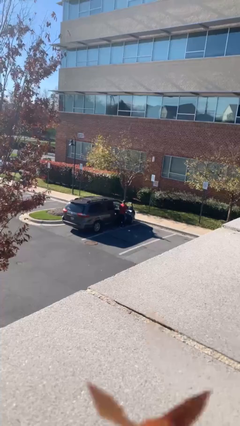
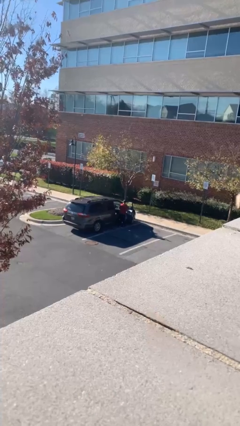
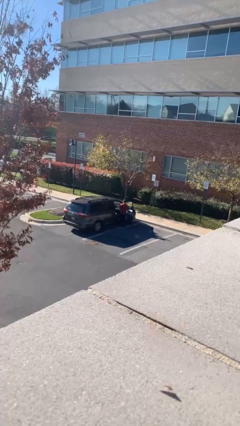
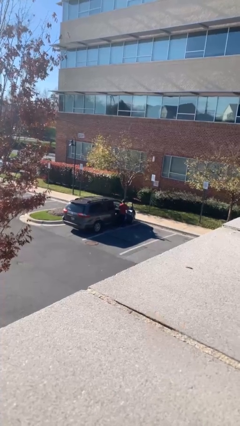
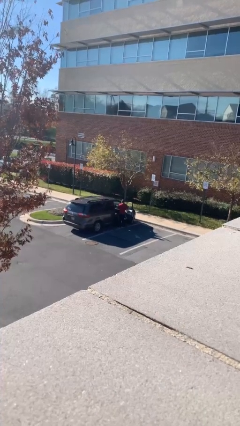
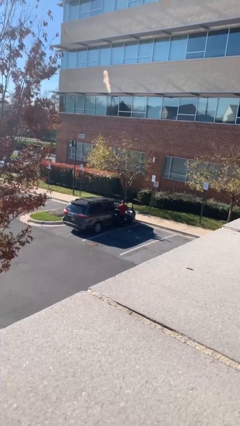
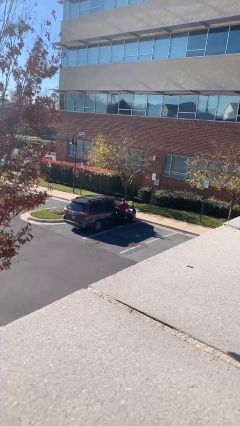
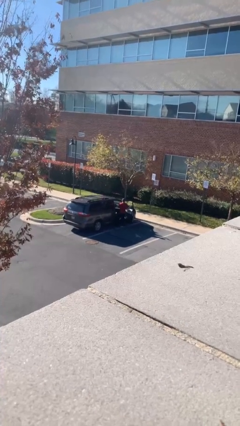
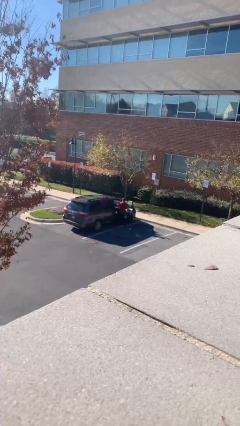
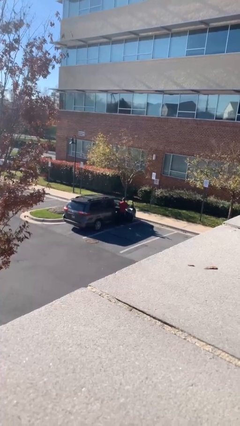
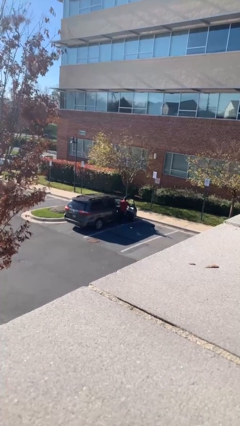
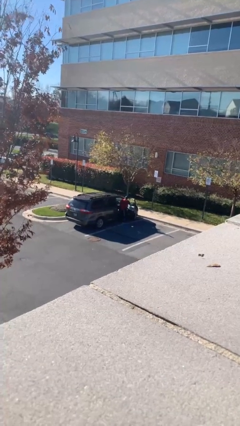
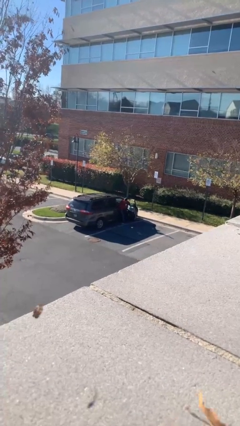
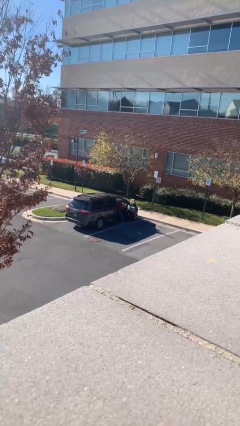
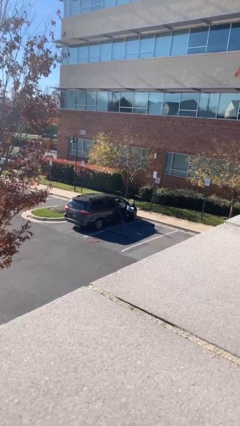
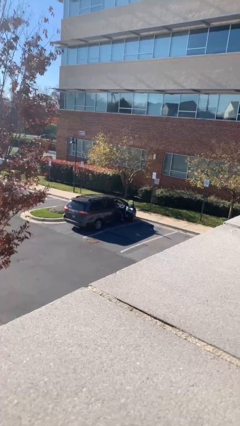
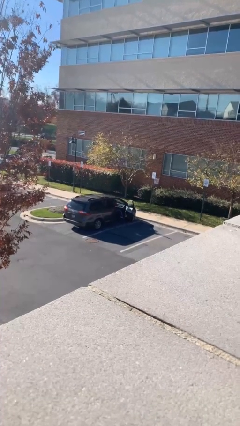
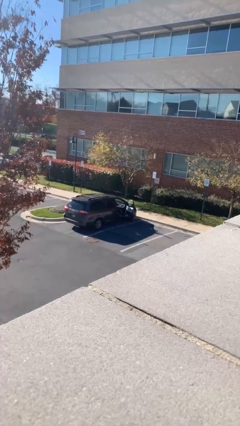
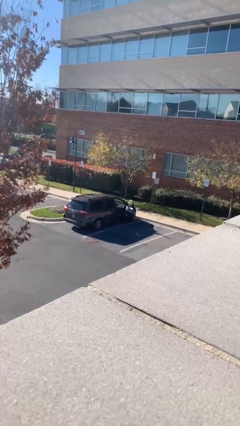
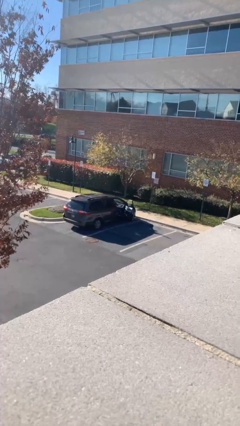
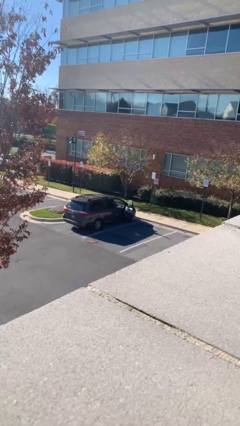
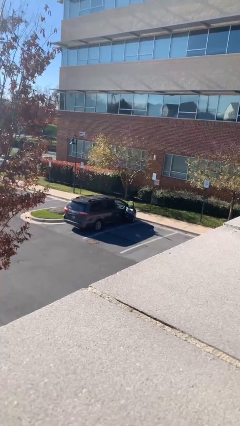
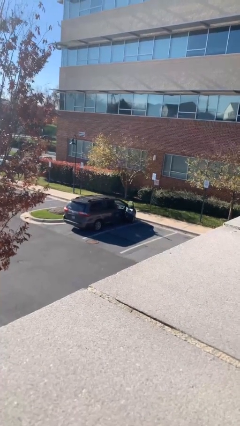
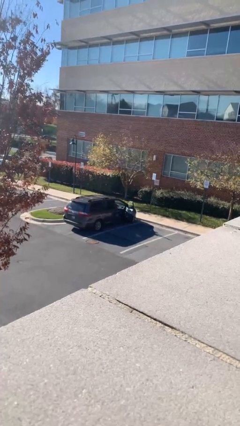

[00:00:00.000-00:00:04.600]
person enters car

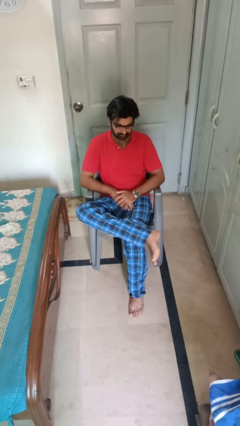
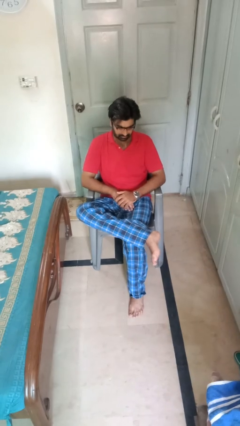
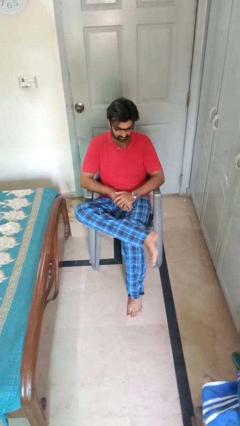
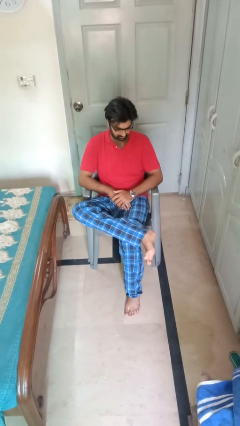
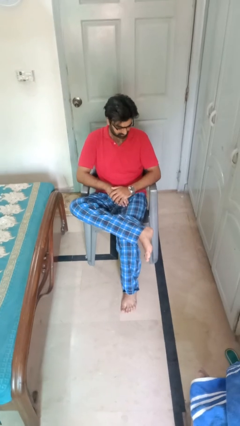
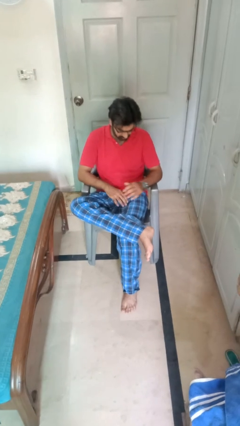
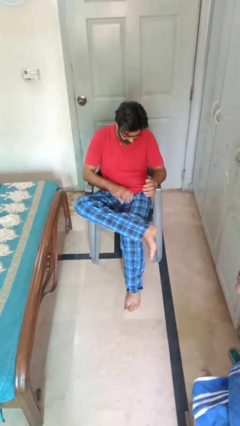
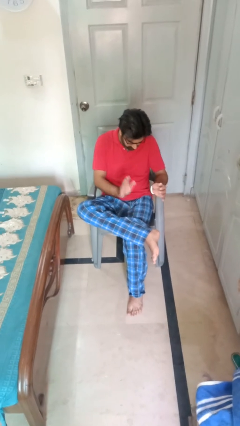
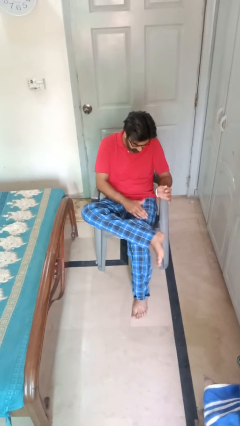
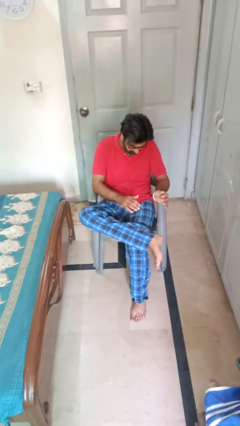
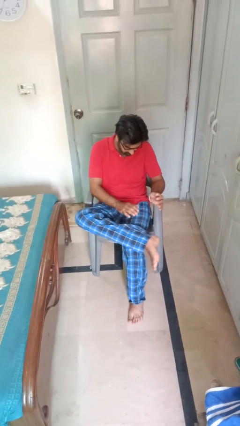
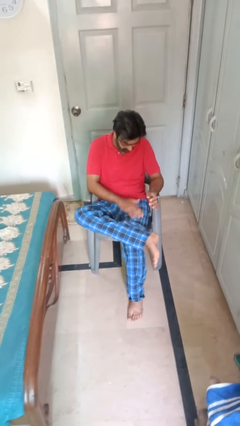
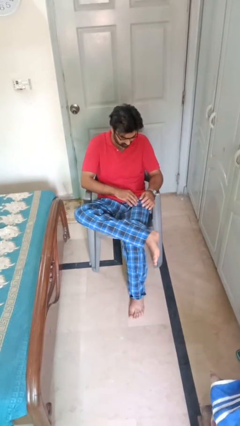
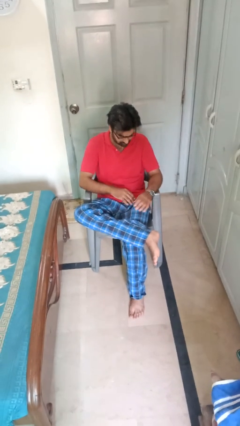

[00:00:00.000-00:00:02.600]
person swats bug

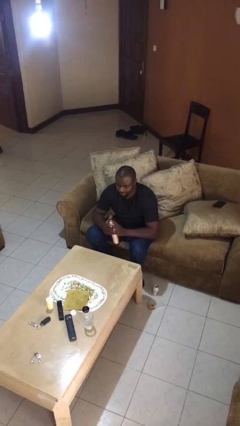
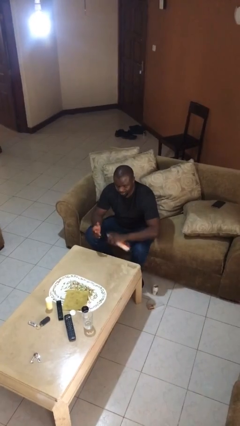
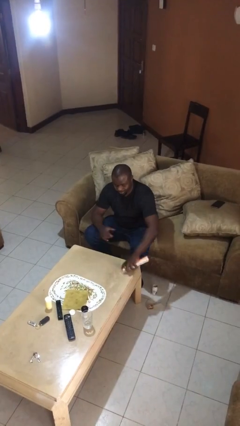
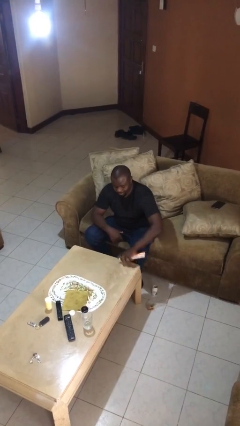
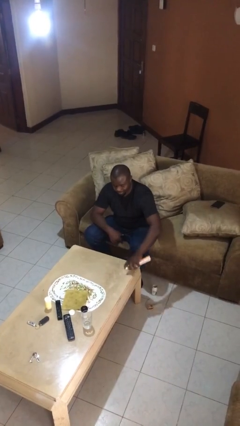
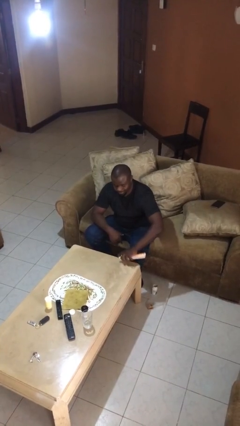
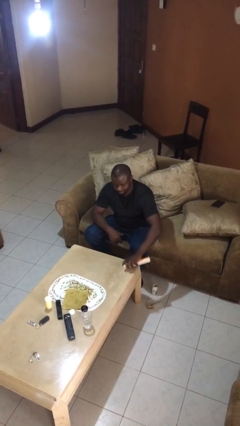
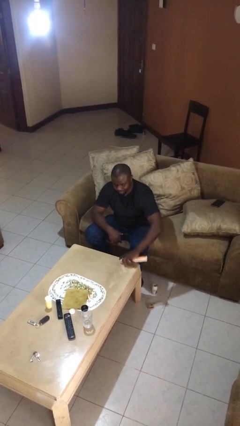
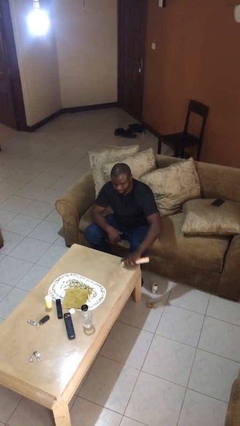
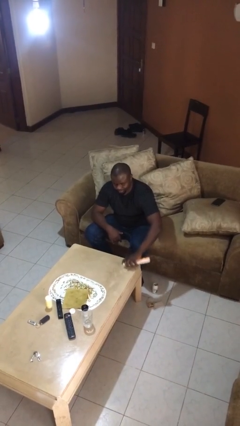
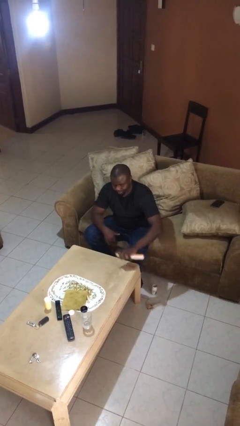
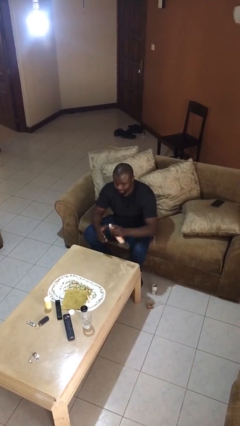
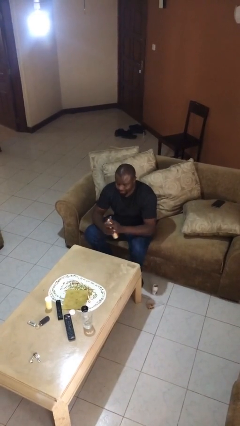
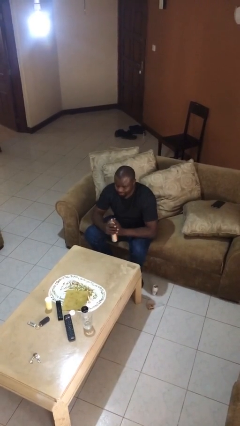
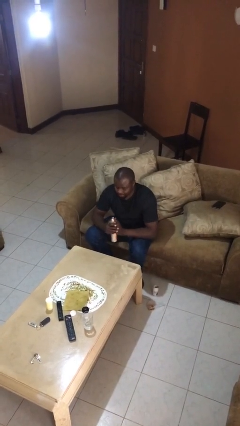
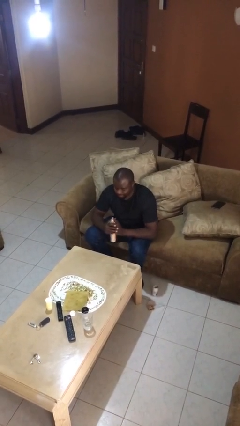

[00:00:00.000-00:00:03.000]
person sprays from bottle

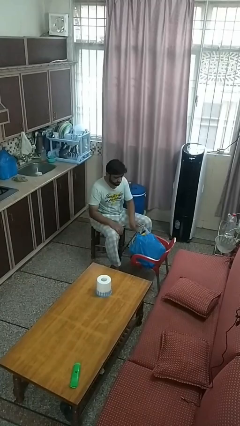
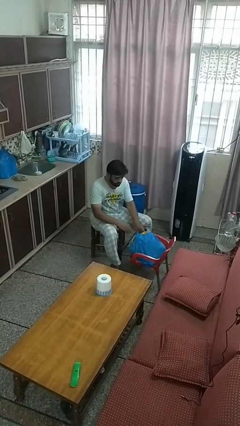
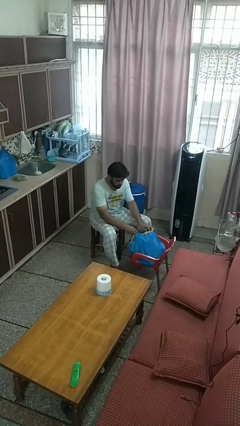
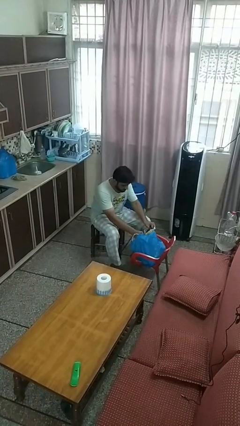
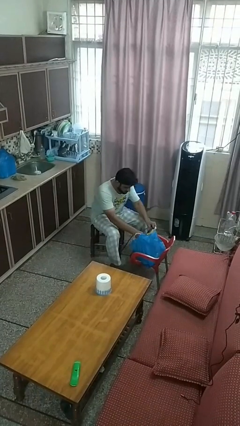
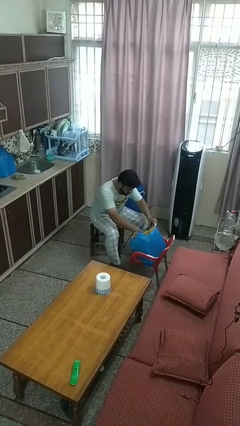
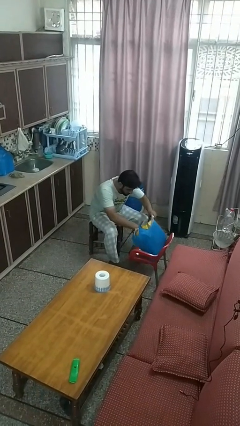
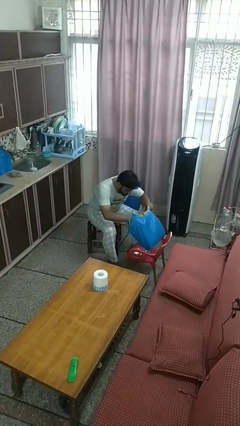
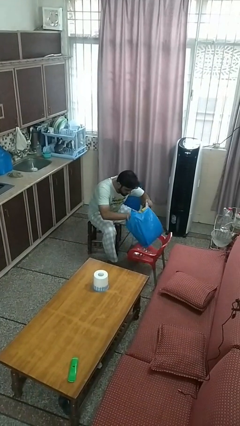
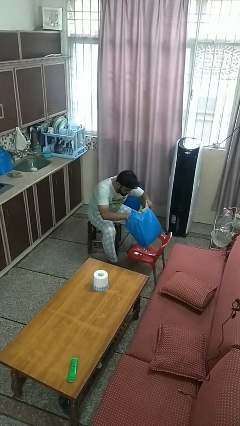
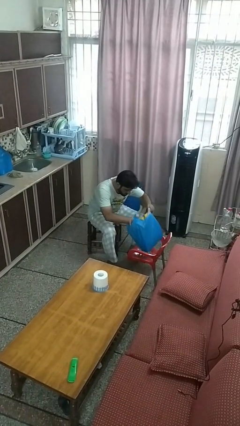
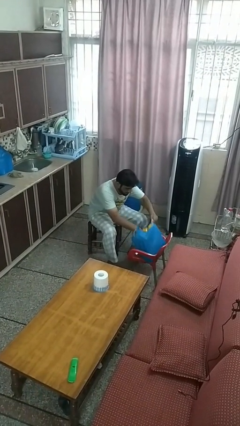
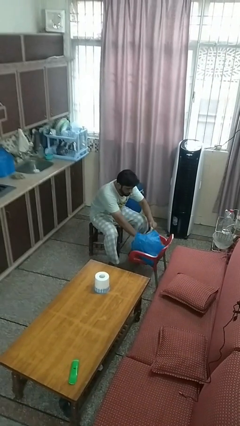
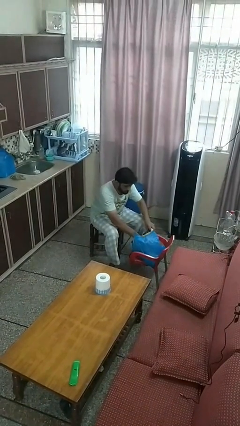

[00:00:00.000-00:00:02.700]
person searches in bag

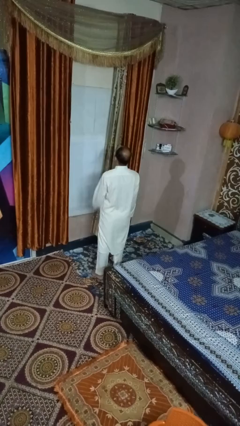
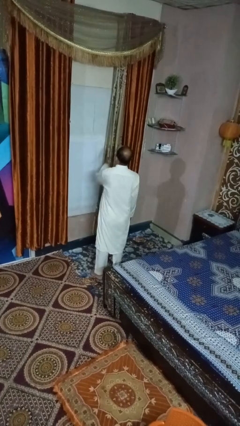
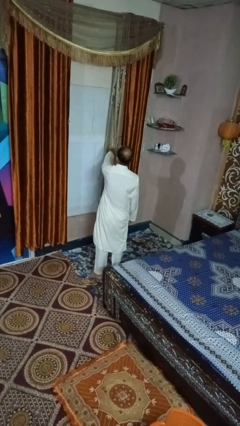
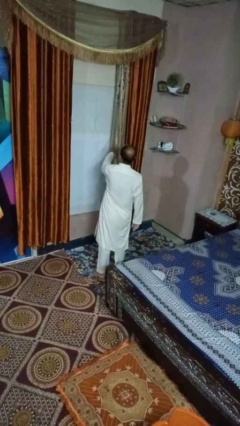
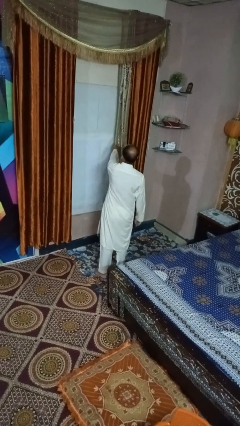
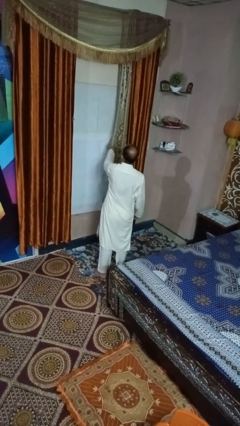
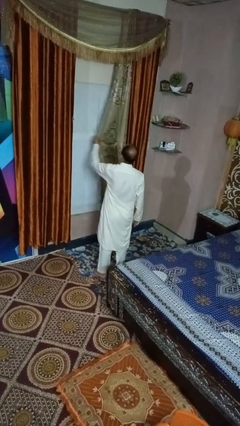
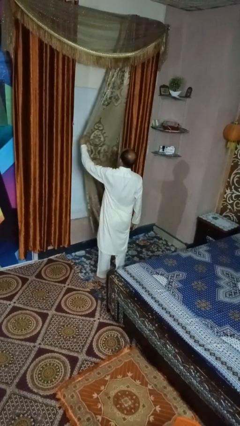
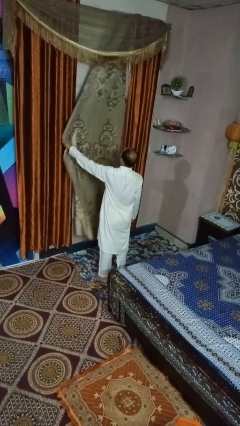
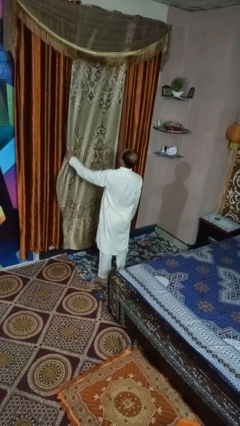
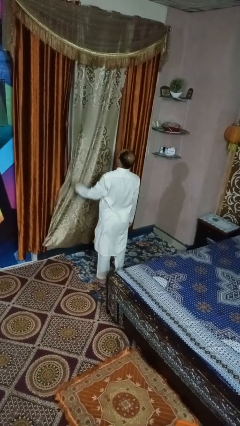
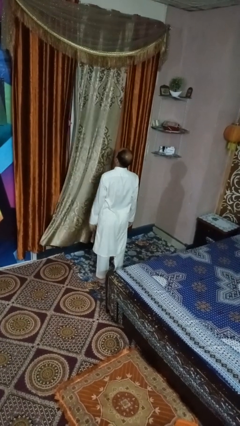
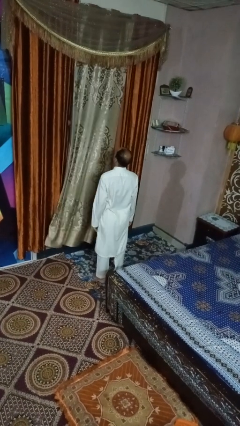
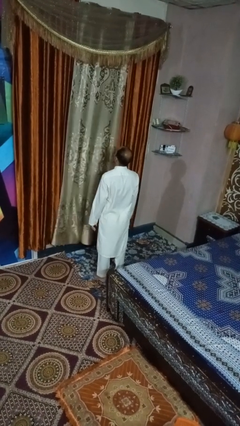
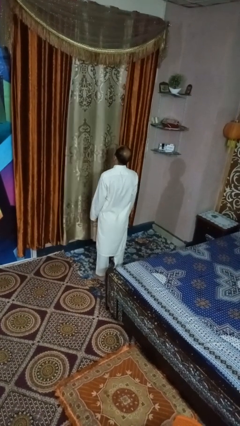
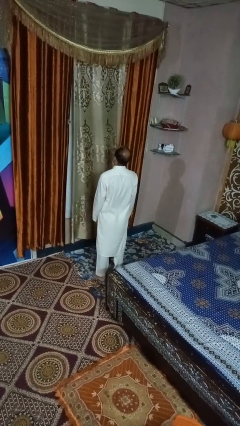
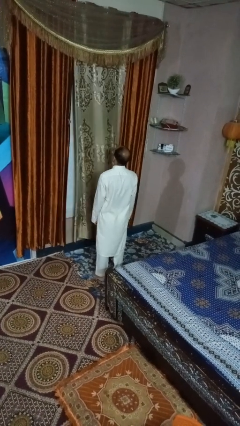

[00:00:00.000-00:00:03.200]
person closes curtains

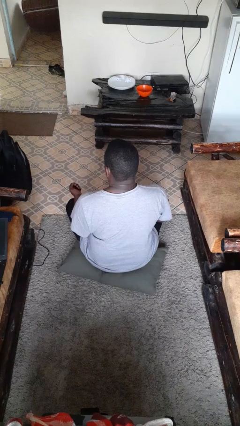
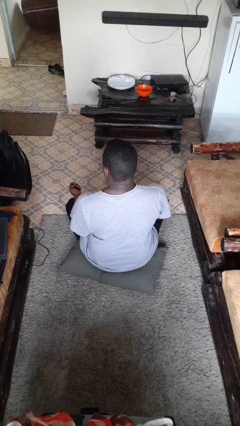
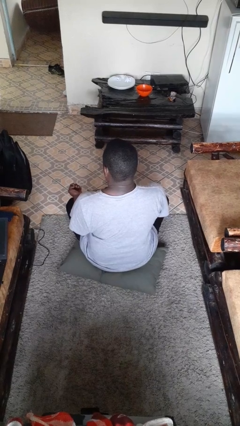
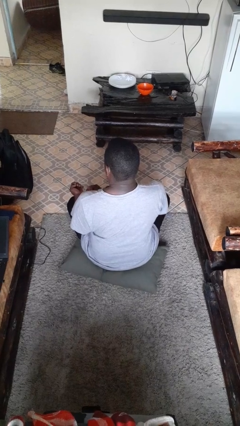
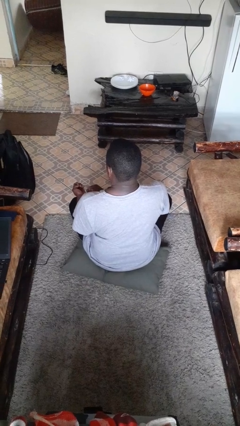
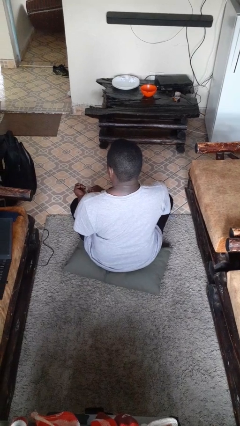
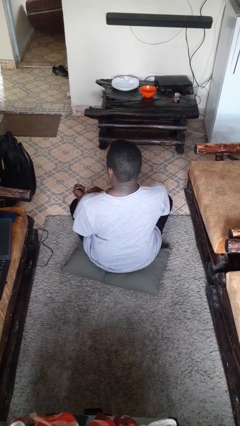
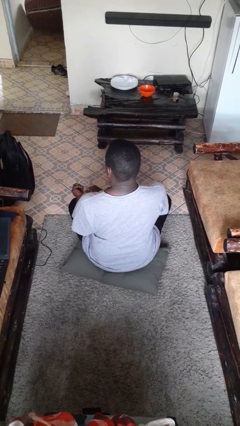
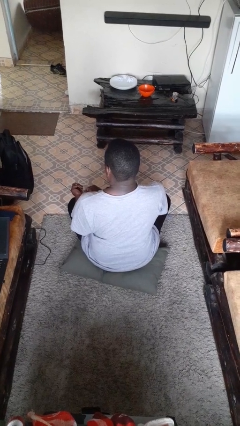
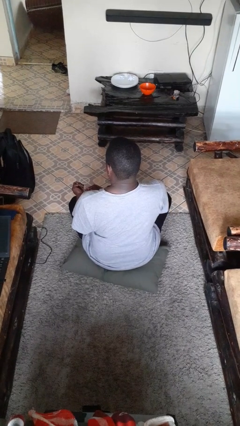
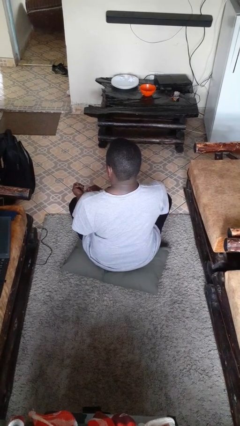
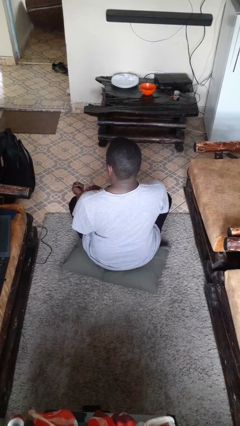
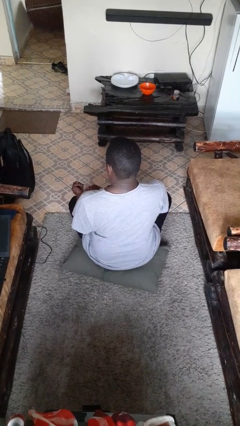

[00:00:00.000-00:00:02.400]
person clips fingernails
